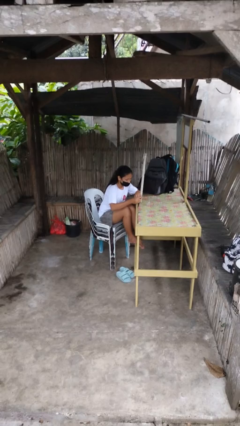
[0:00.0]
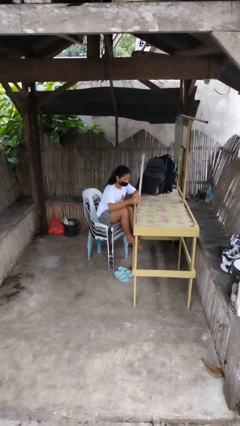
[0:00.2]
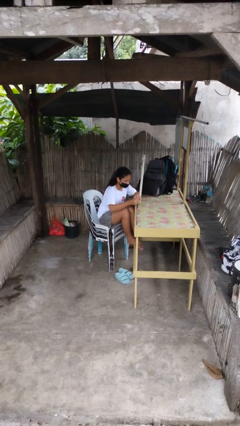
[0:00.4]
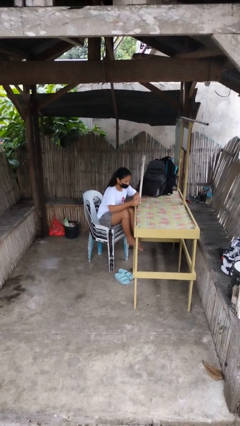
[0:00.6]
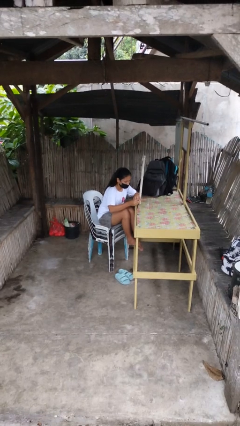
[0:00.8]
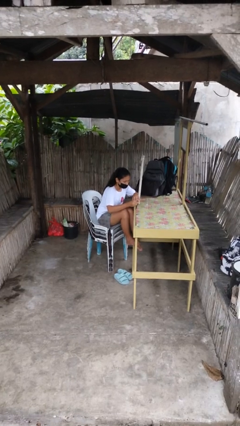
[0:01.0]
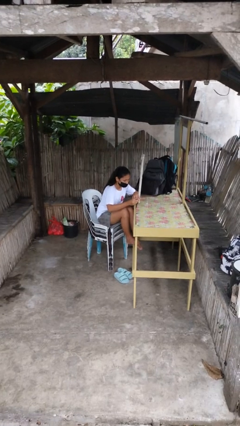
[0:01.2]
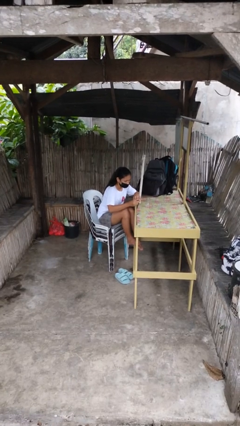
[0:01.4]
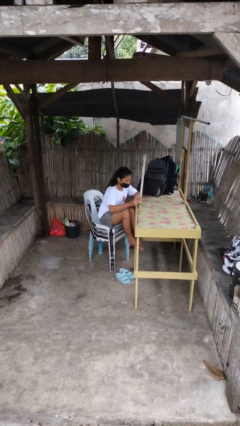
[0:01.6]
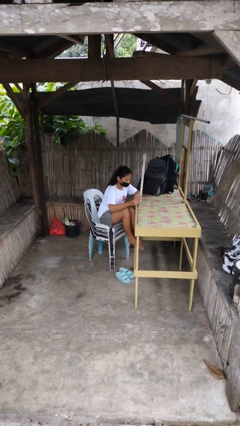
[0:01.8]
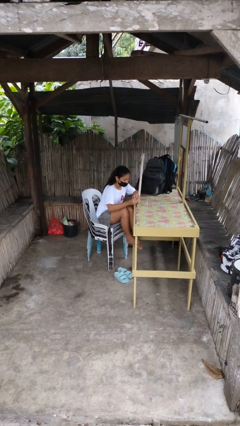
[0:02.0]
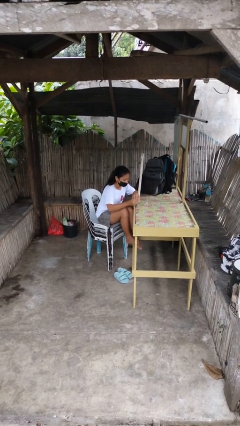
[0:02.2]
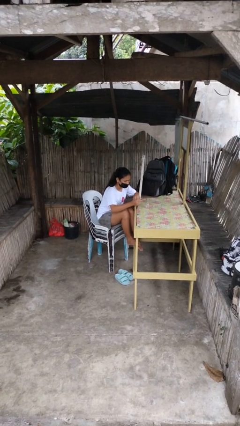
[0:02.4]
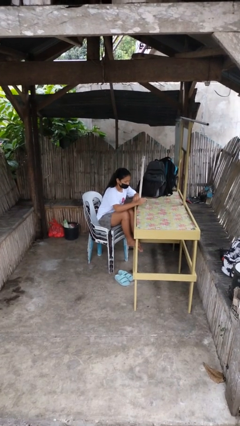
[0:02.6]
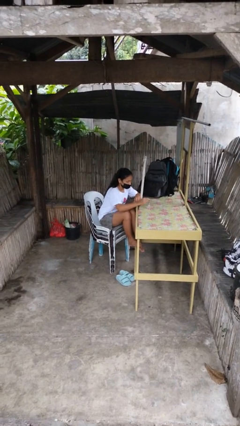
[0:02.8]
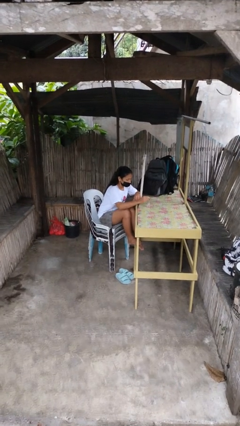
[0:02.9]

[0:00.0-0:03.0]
person paints fingernails

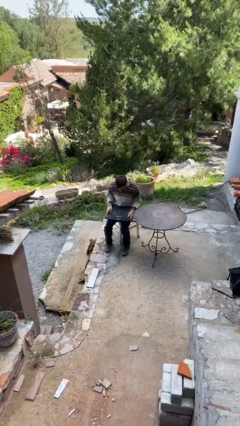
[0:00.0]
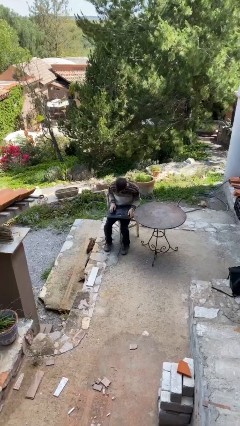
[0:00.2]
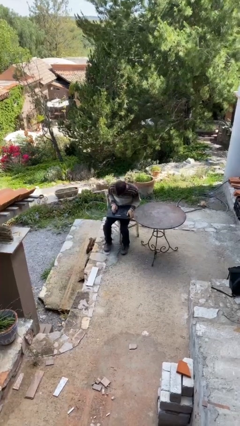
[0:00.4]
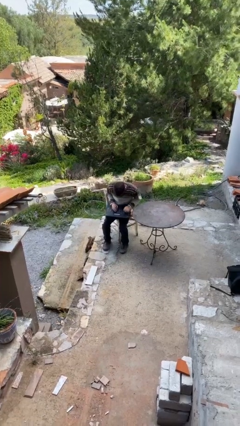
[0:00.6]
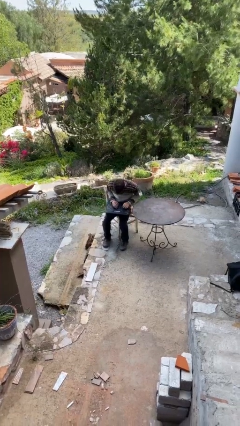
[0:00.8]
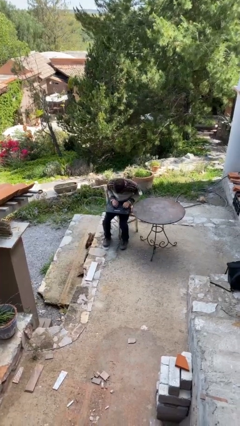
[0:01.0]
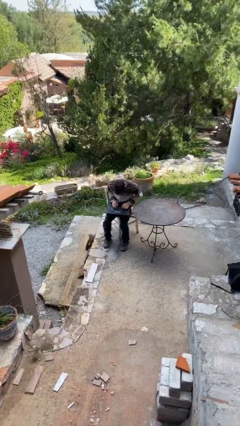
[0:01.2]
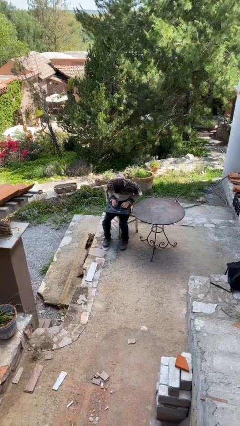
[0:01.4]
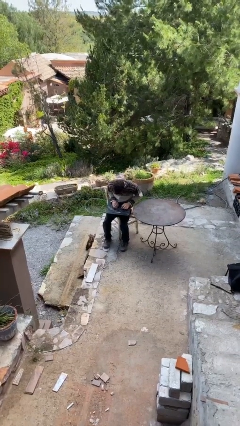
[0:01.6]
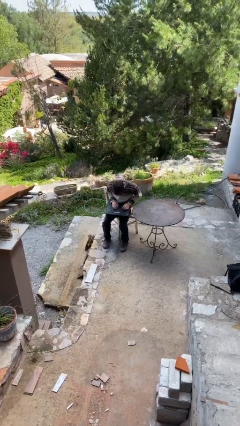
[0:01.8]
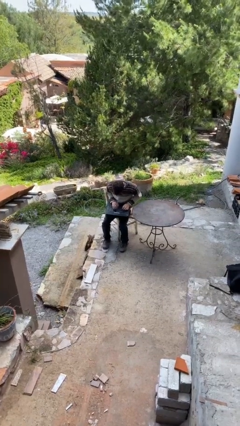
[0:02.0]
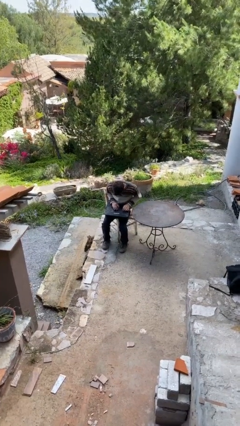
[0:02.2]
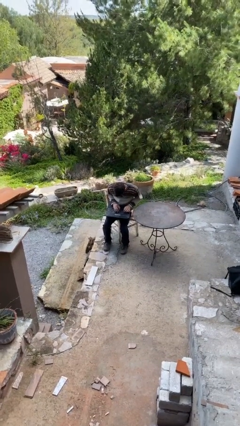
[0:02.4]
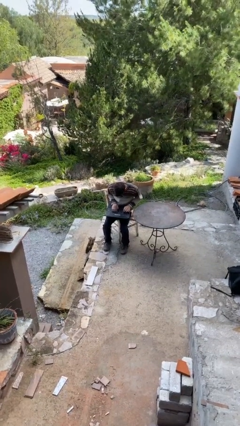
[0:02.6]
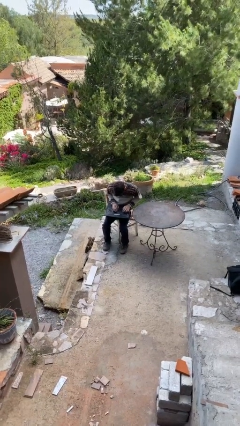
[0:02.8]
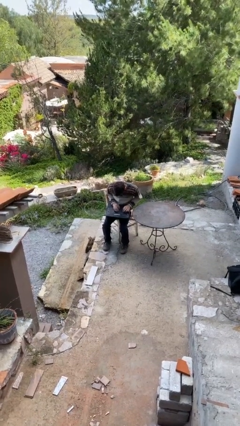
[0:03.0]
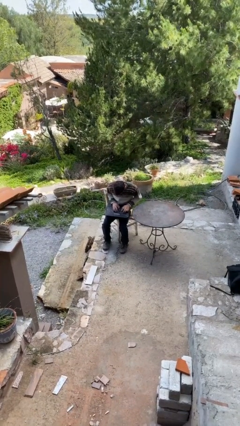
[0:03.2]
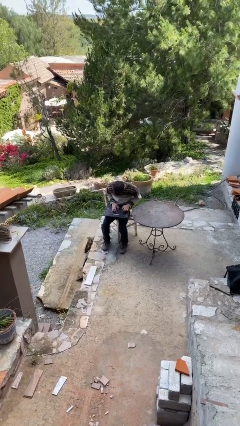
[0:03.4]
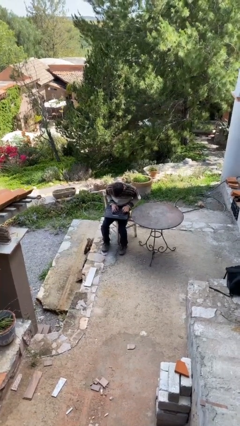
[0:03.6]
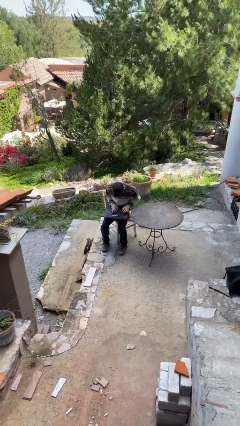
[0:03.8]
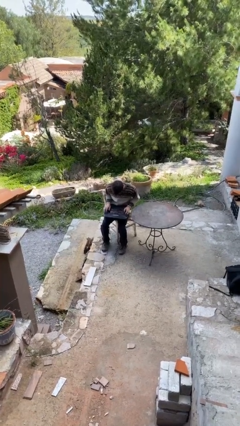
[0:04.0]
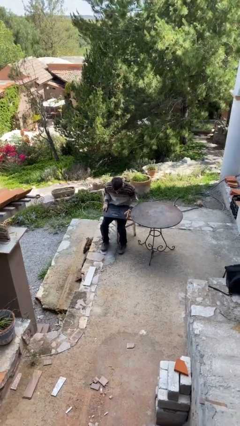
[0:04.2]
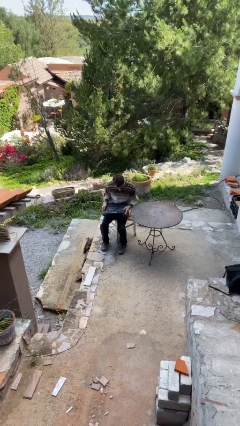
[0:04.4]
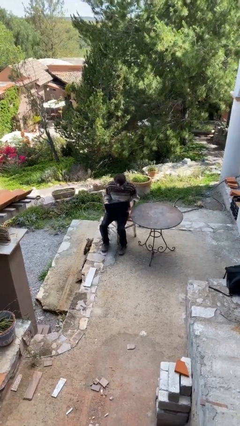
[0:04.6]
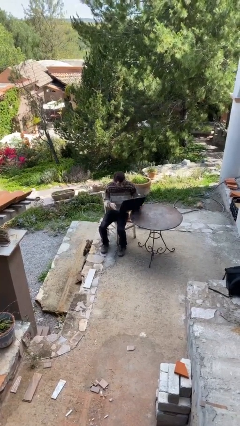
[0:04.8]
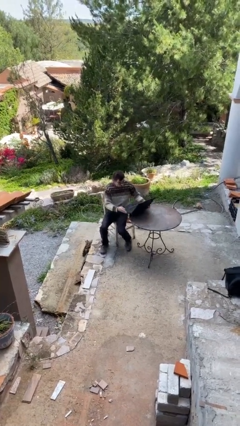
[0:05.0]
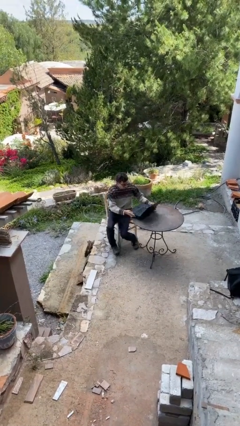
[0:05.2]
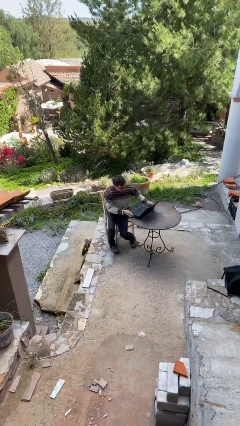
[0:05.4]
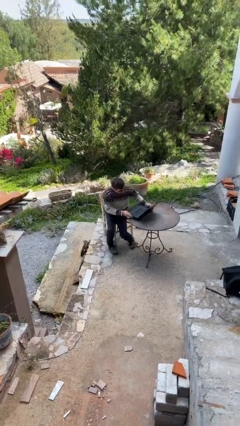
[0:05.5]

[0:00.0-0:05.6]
person interacts with laptop

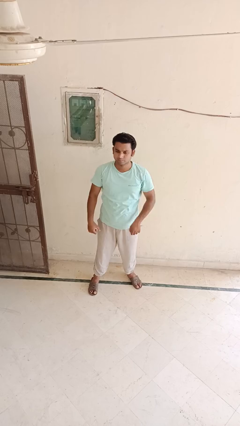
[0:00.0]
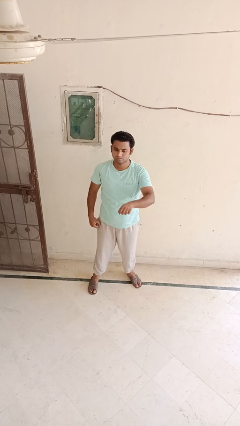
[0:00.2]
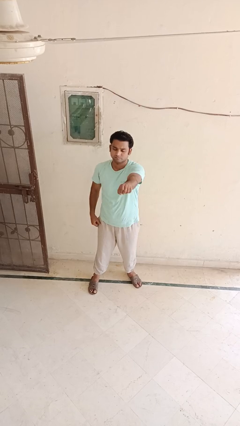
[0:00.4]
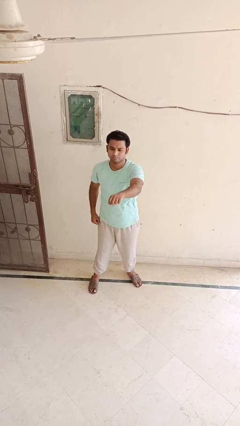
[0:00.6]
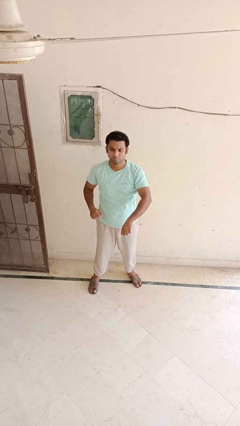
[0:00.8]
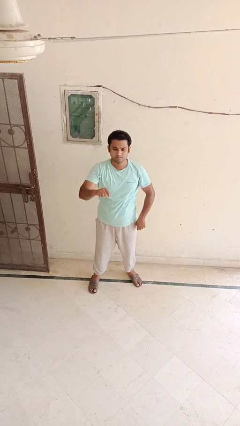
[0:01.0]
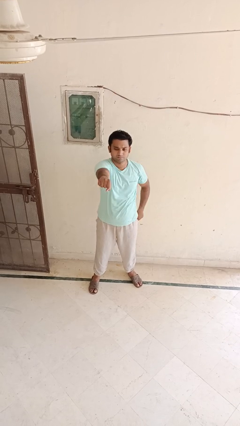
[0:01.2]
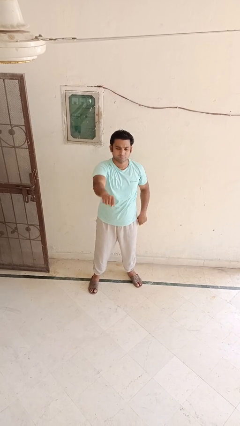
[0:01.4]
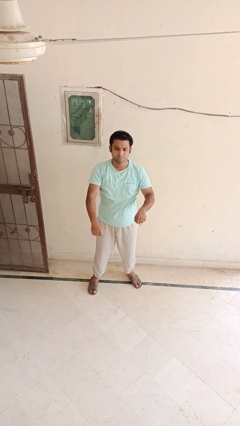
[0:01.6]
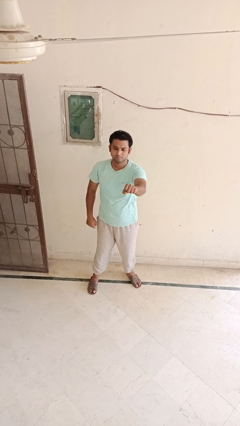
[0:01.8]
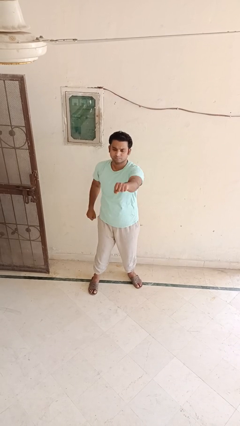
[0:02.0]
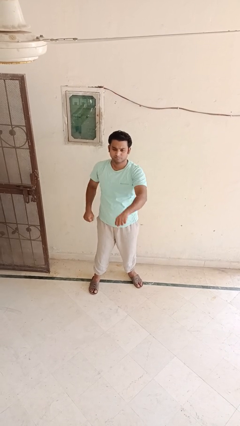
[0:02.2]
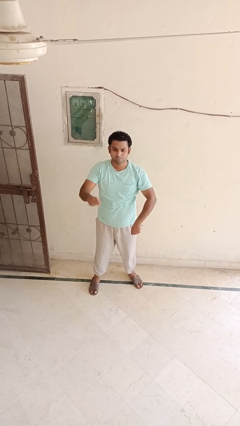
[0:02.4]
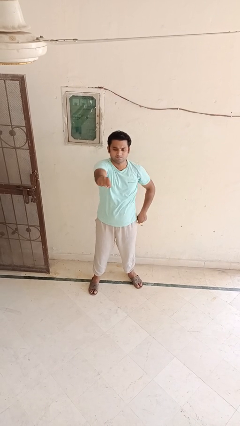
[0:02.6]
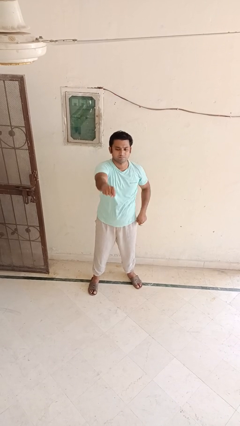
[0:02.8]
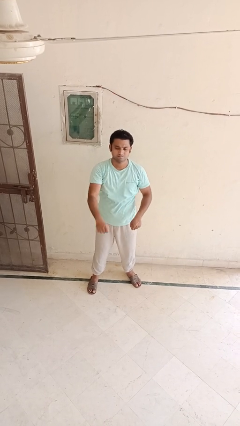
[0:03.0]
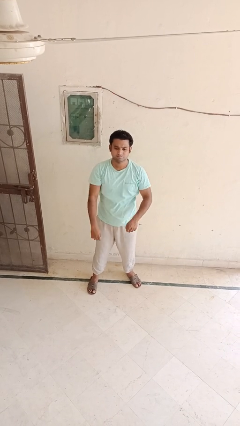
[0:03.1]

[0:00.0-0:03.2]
person punches

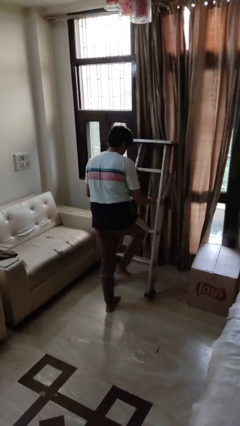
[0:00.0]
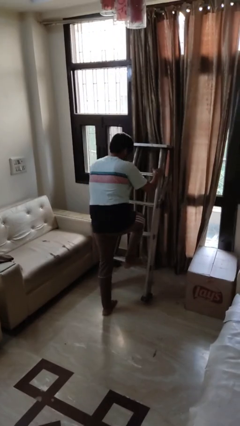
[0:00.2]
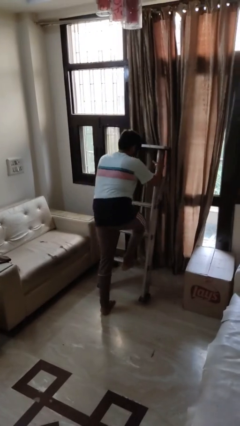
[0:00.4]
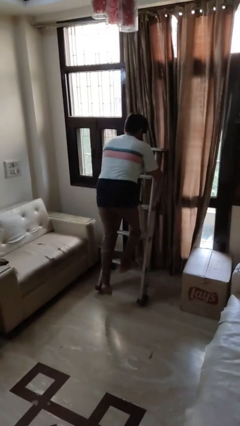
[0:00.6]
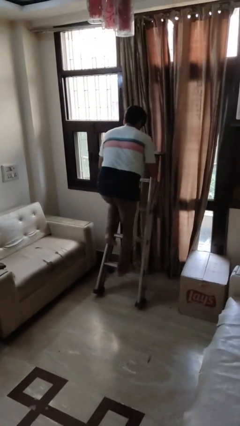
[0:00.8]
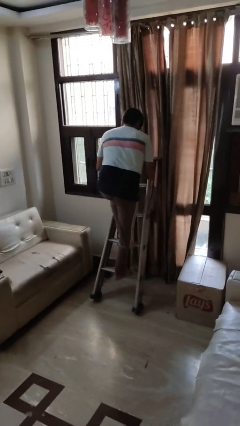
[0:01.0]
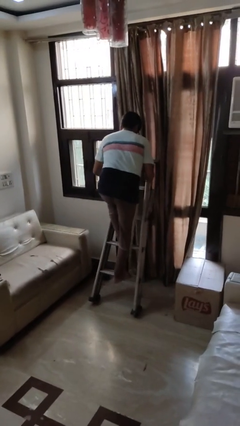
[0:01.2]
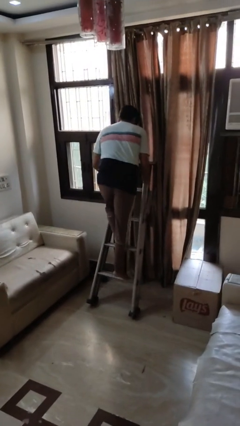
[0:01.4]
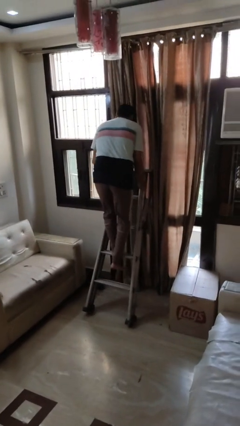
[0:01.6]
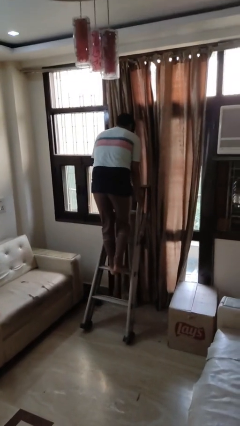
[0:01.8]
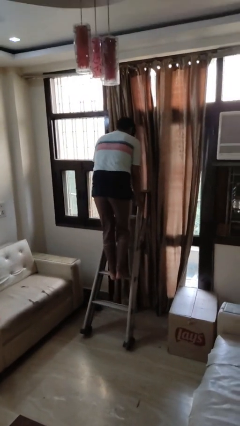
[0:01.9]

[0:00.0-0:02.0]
person climbs up ladder

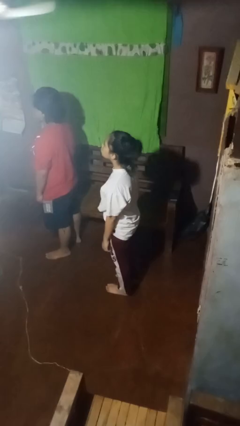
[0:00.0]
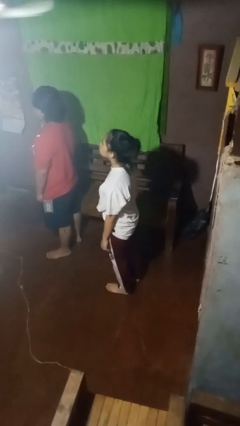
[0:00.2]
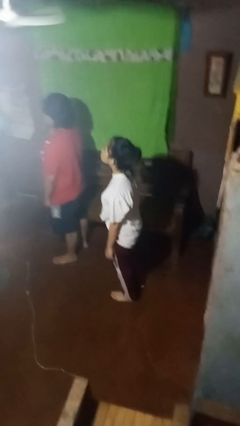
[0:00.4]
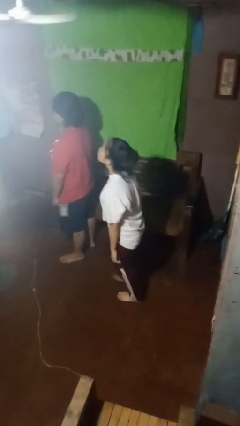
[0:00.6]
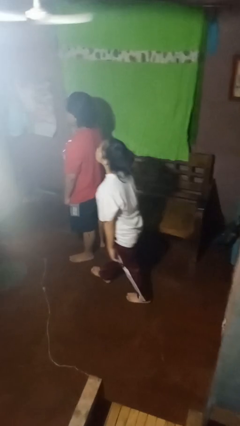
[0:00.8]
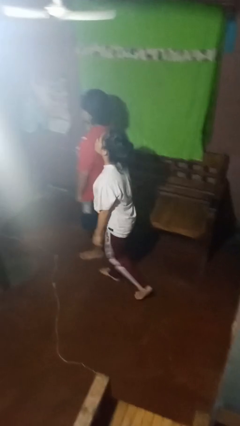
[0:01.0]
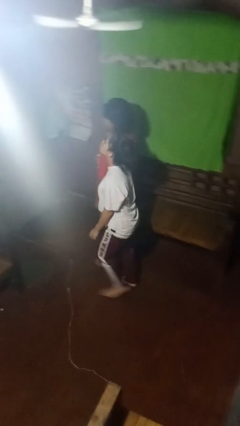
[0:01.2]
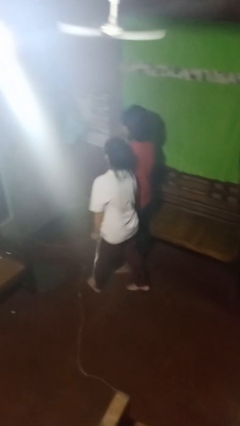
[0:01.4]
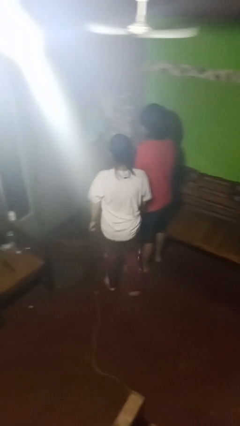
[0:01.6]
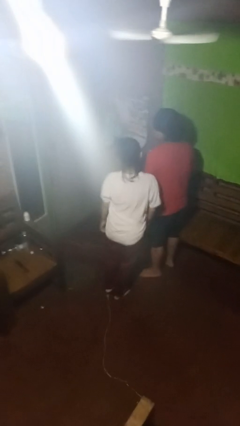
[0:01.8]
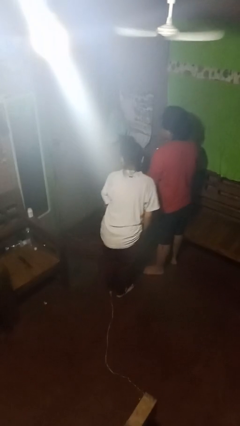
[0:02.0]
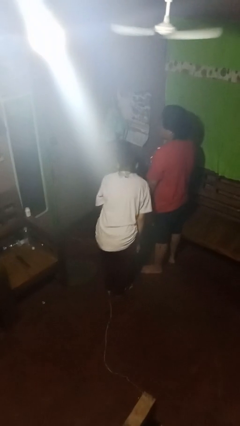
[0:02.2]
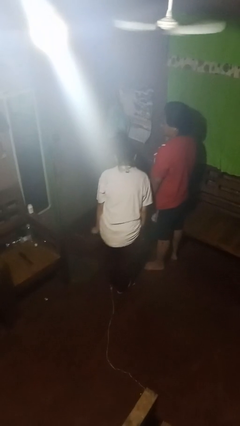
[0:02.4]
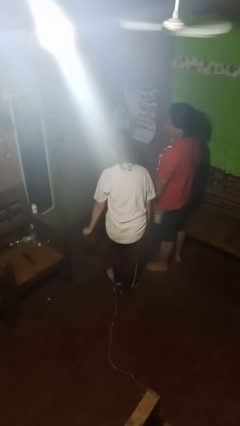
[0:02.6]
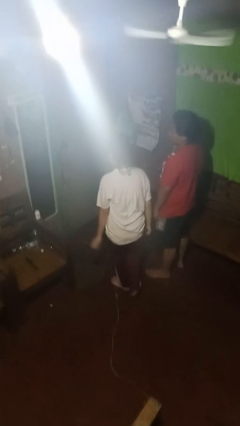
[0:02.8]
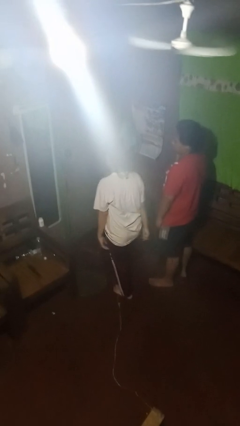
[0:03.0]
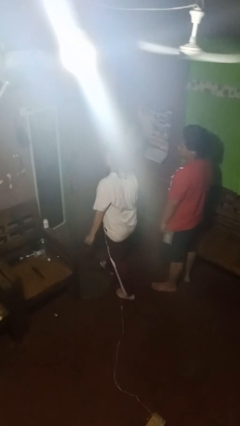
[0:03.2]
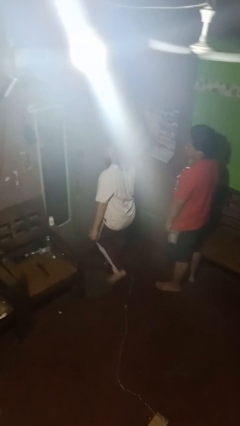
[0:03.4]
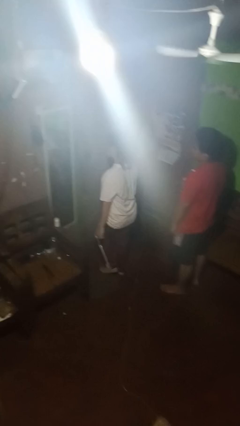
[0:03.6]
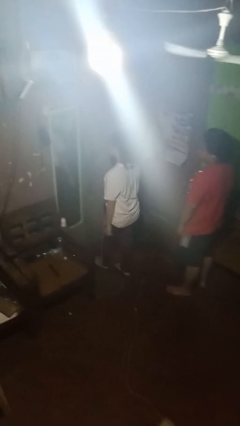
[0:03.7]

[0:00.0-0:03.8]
person bumps into person

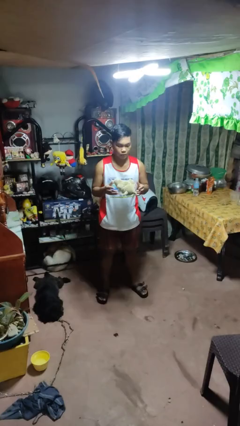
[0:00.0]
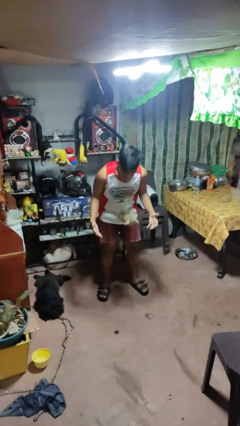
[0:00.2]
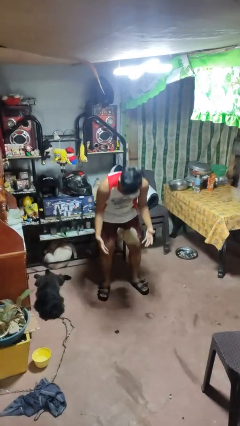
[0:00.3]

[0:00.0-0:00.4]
person drops object
